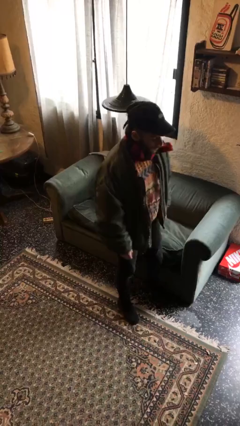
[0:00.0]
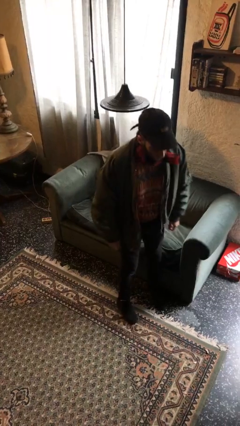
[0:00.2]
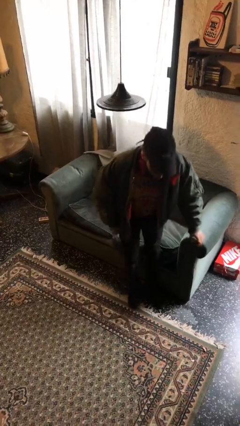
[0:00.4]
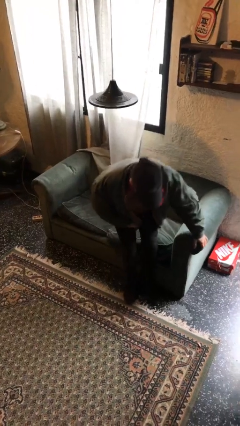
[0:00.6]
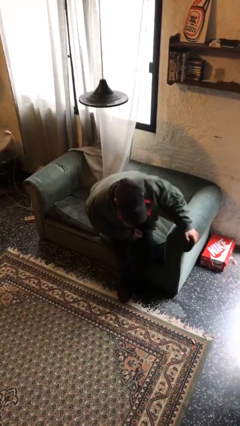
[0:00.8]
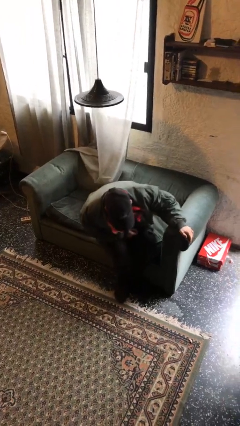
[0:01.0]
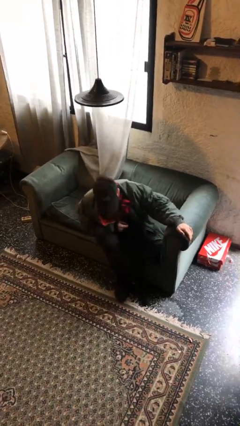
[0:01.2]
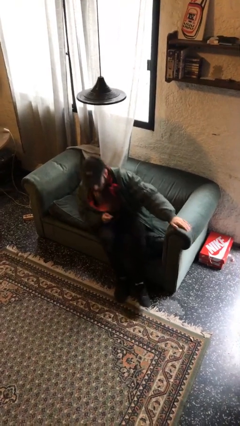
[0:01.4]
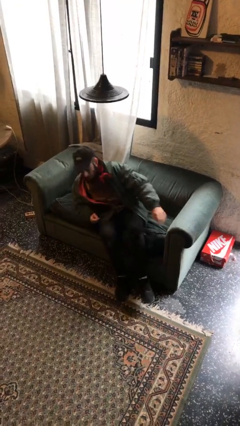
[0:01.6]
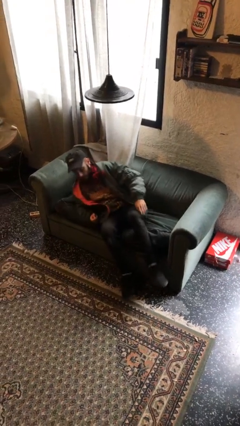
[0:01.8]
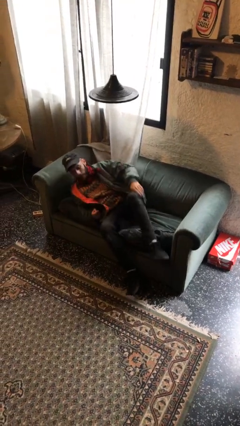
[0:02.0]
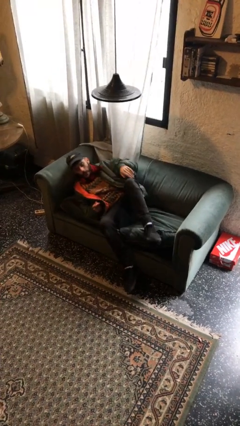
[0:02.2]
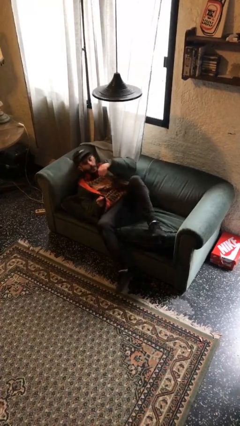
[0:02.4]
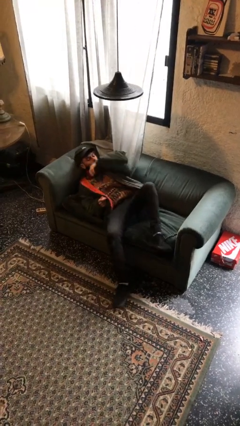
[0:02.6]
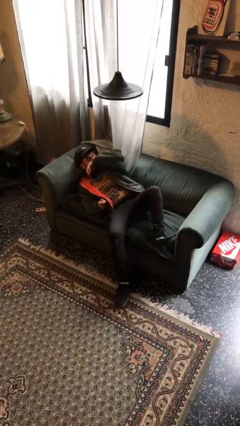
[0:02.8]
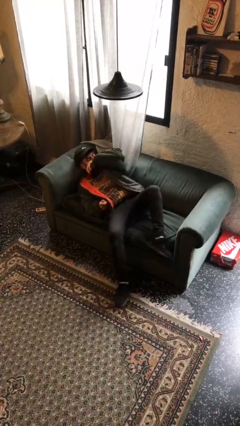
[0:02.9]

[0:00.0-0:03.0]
person lies down on couch

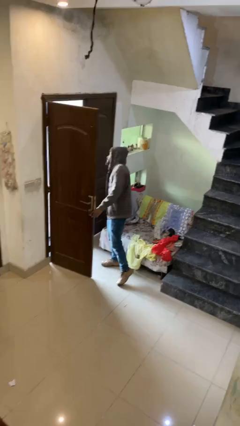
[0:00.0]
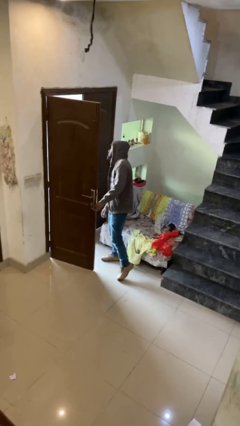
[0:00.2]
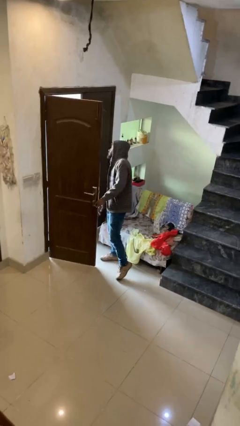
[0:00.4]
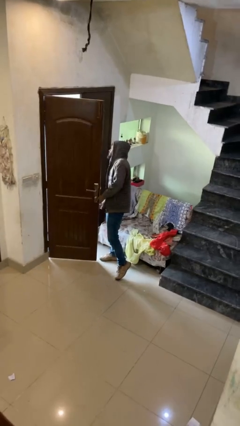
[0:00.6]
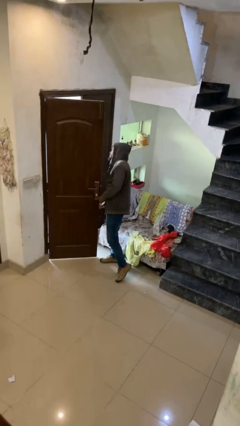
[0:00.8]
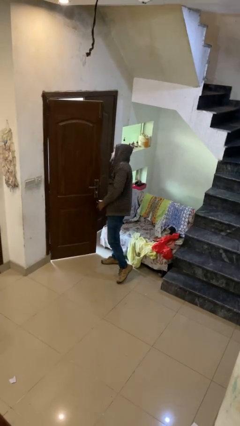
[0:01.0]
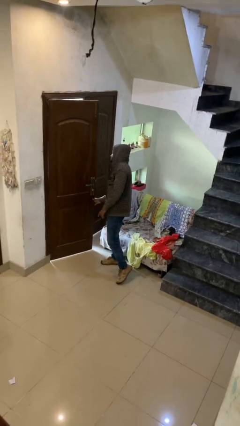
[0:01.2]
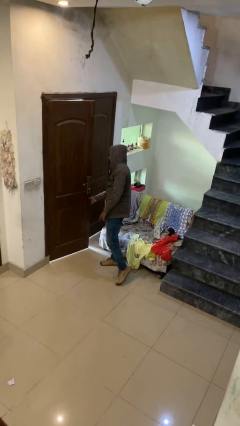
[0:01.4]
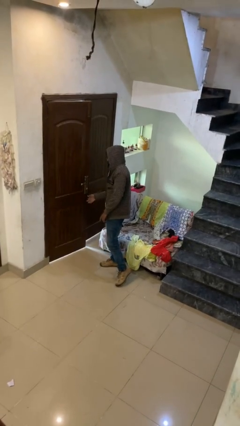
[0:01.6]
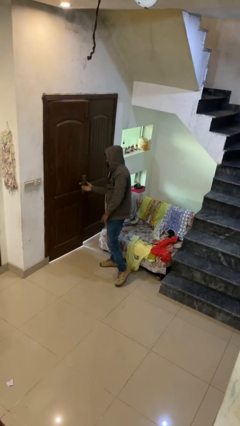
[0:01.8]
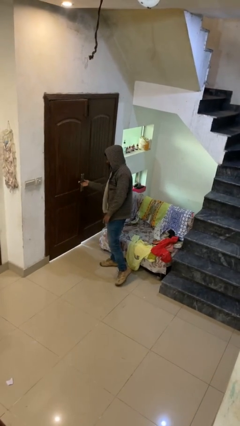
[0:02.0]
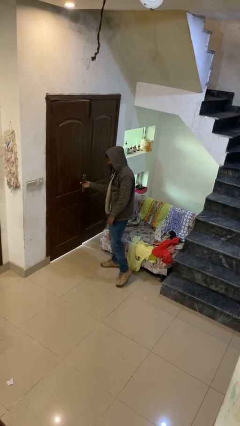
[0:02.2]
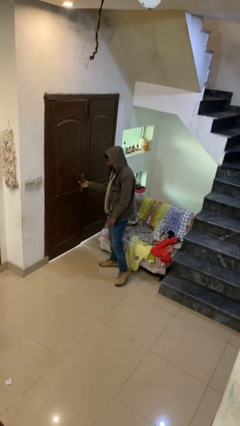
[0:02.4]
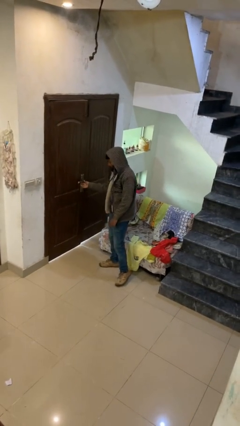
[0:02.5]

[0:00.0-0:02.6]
person closes facility door

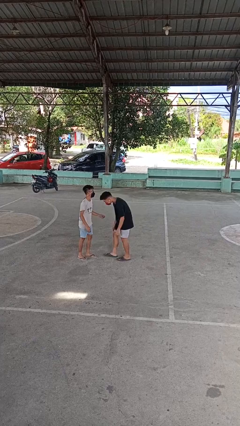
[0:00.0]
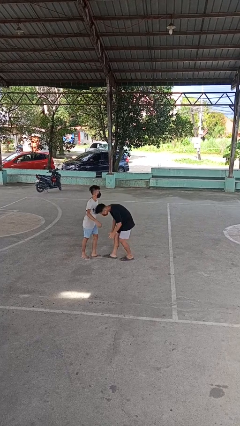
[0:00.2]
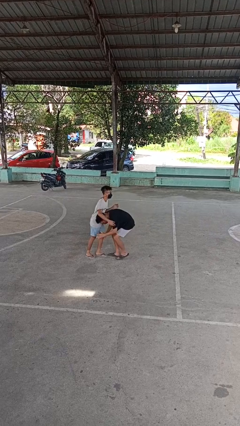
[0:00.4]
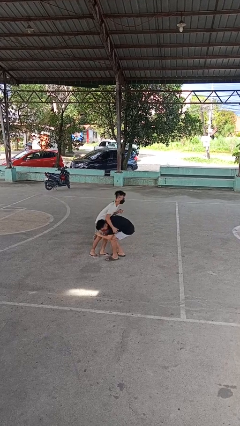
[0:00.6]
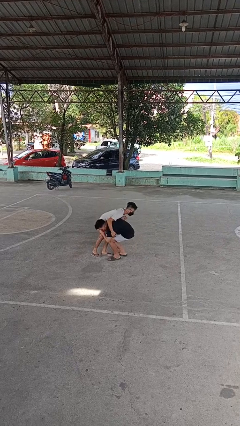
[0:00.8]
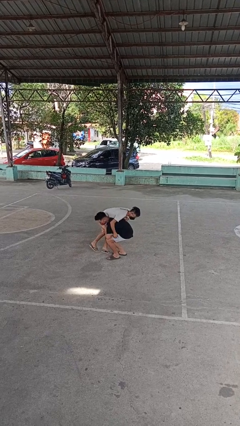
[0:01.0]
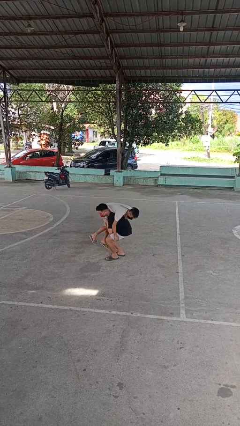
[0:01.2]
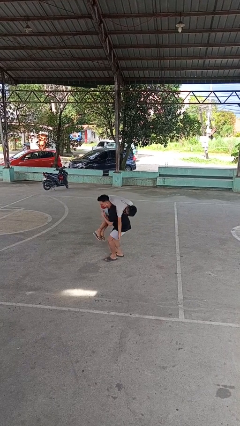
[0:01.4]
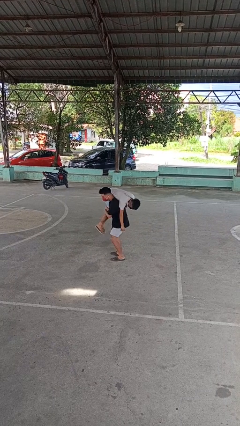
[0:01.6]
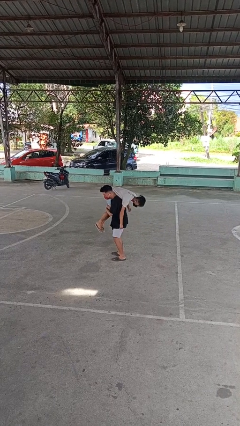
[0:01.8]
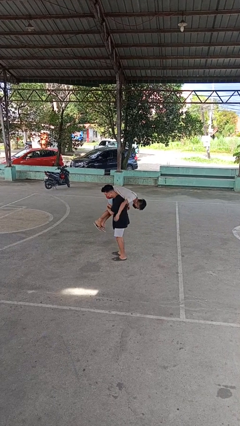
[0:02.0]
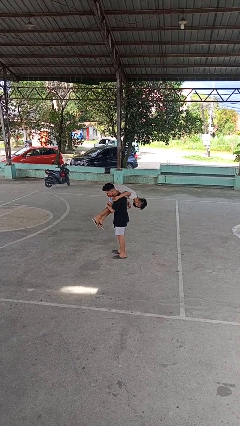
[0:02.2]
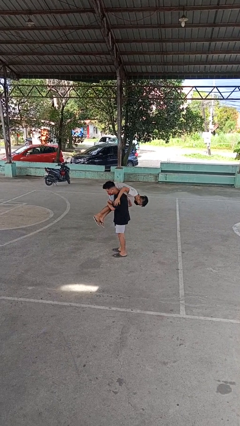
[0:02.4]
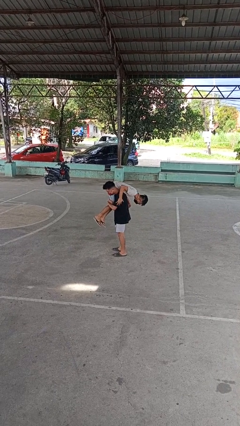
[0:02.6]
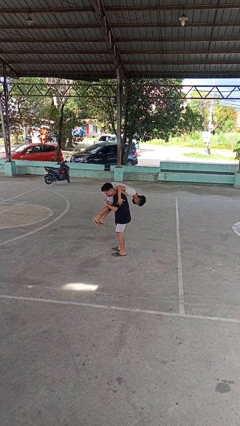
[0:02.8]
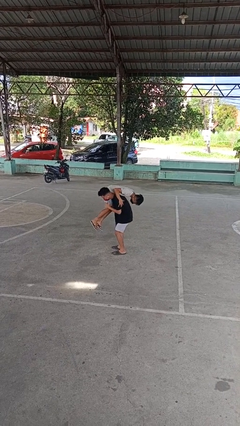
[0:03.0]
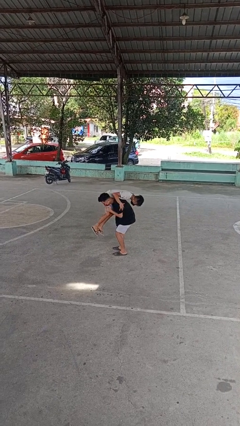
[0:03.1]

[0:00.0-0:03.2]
person carries person over shoulder

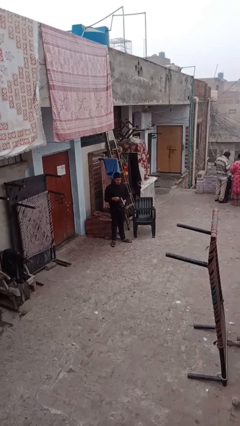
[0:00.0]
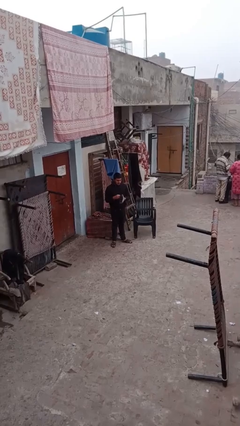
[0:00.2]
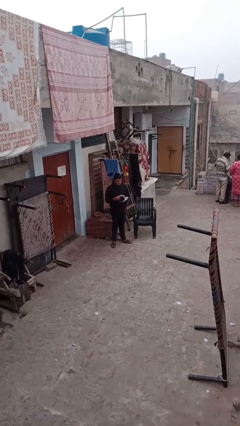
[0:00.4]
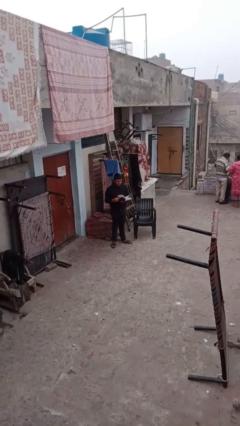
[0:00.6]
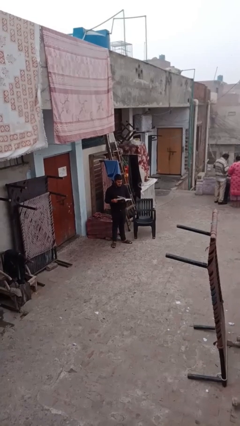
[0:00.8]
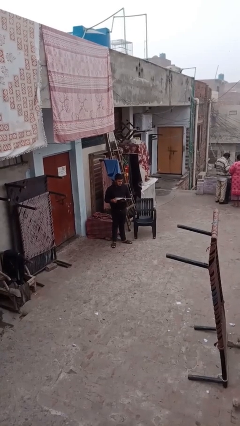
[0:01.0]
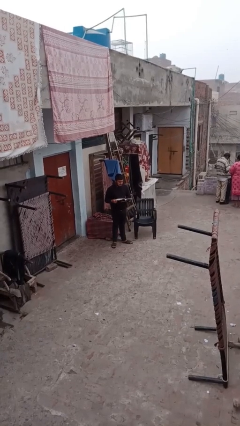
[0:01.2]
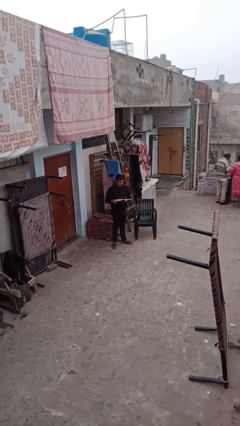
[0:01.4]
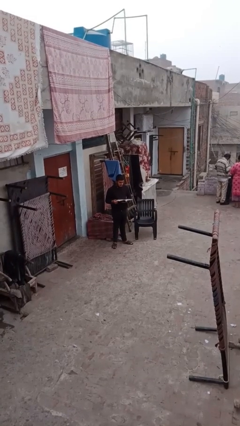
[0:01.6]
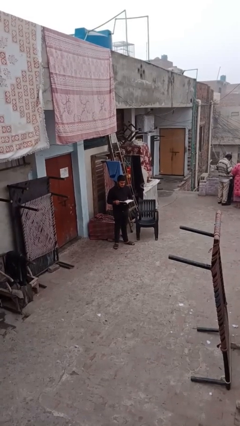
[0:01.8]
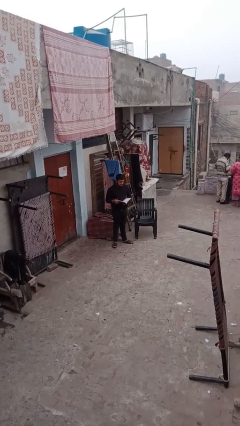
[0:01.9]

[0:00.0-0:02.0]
person reads document

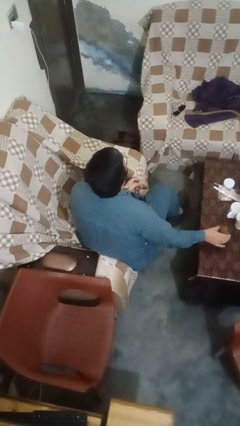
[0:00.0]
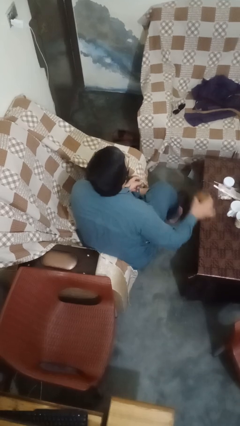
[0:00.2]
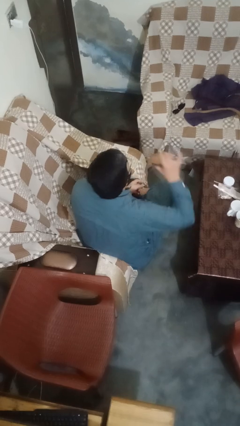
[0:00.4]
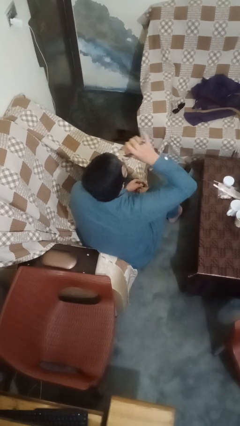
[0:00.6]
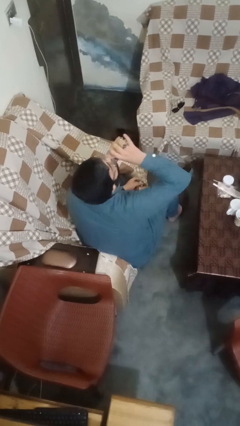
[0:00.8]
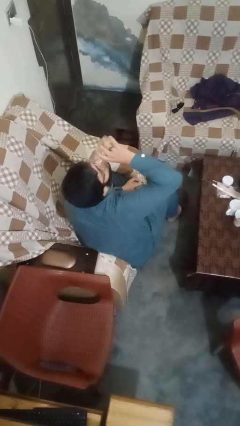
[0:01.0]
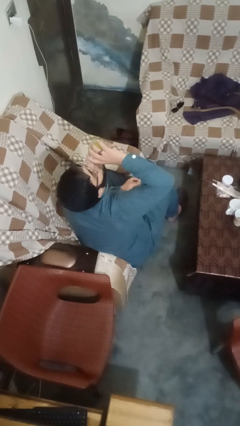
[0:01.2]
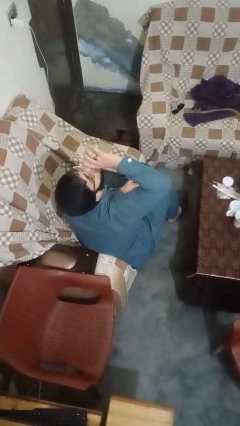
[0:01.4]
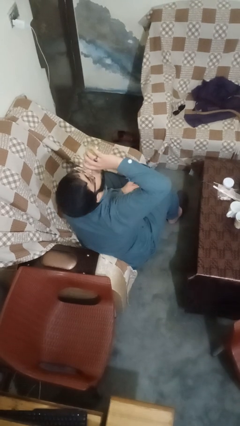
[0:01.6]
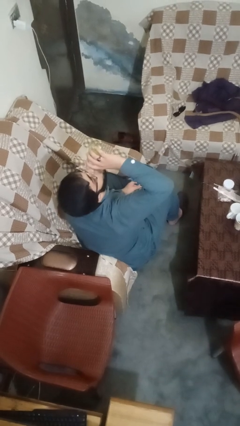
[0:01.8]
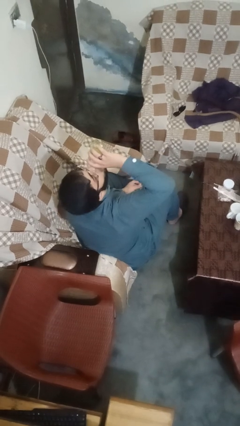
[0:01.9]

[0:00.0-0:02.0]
person drinks from cup

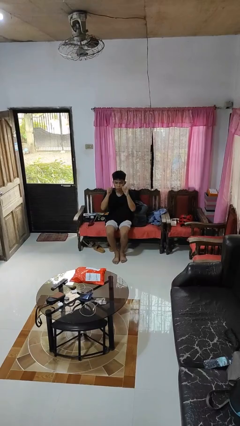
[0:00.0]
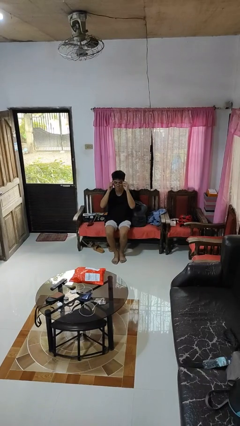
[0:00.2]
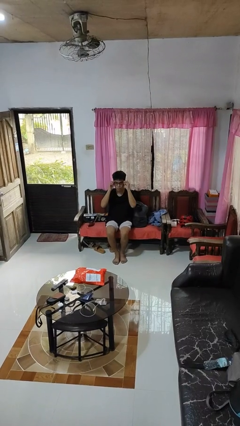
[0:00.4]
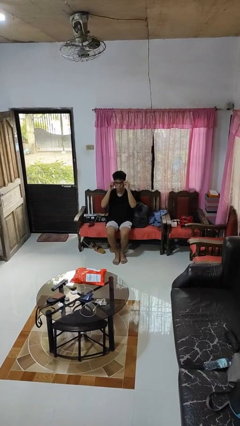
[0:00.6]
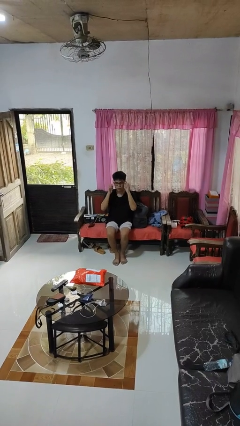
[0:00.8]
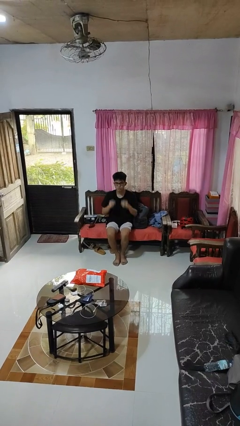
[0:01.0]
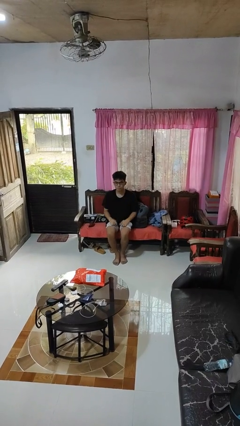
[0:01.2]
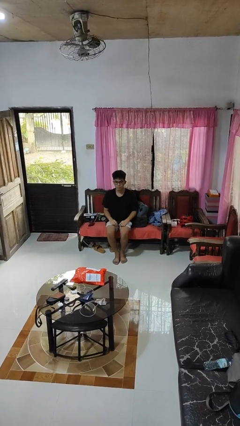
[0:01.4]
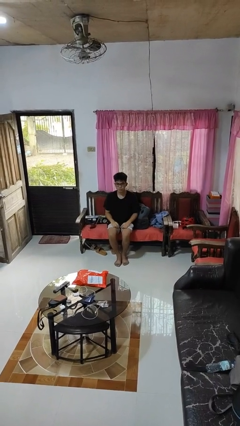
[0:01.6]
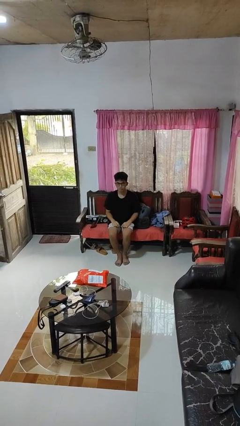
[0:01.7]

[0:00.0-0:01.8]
person puts on glasses

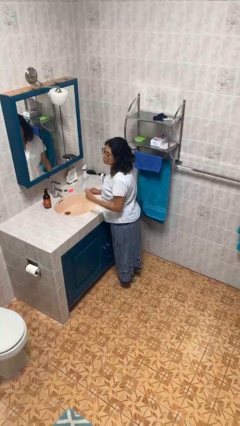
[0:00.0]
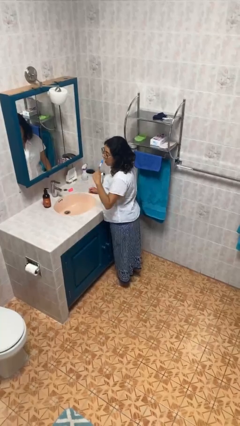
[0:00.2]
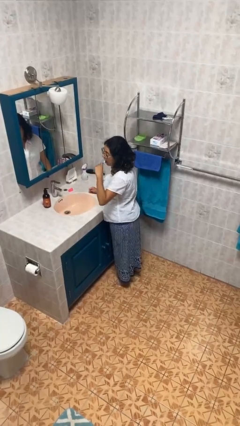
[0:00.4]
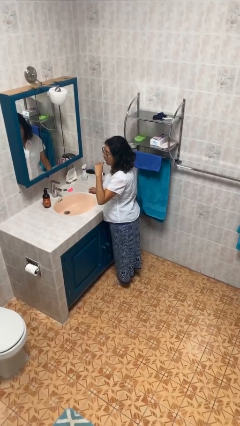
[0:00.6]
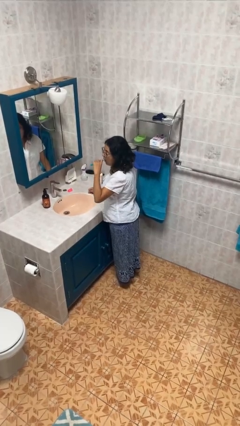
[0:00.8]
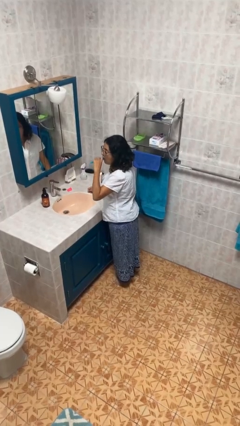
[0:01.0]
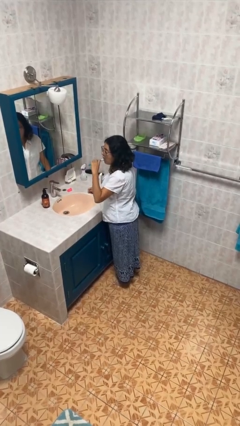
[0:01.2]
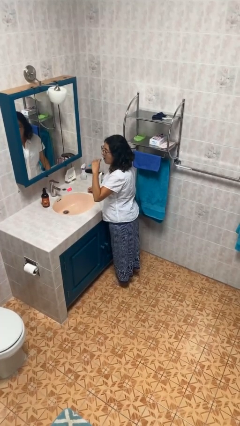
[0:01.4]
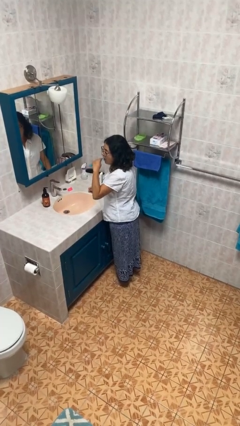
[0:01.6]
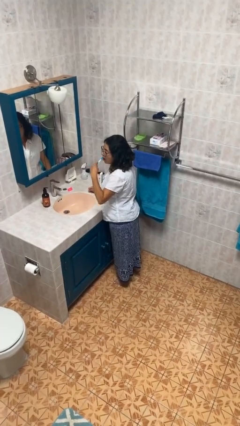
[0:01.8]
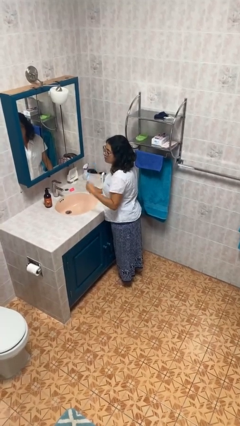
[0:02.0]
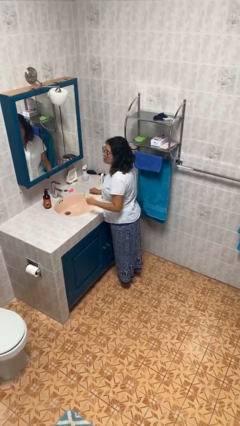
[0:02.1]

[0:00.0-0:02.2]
person brushes teeth

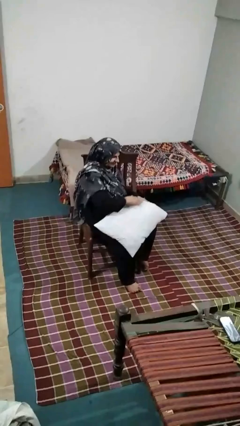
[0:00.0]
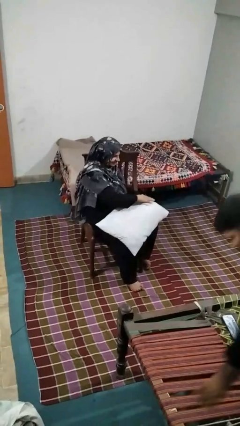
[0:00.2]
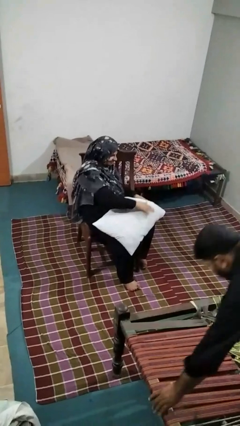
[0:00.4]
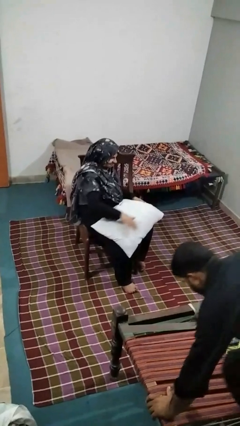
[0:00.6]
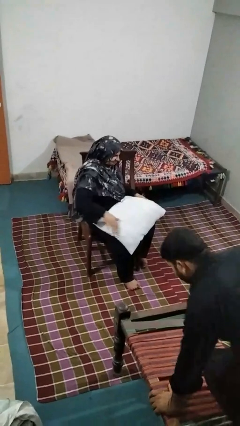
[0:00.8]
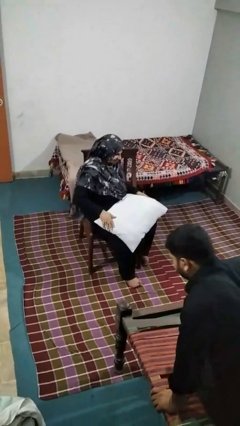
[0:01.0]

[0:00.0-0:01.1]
person waves hand over object
